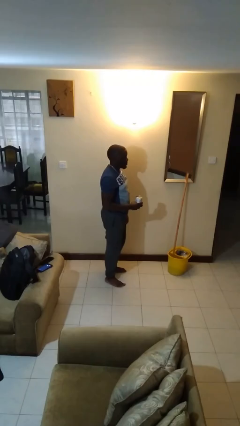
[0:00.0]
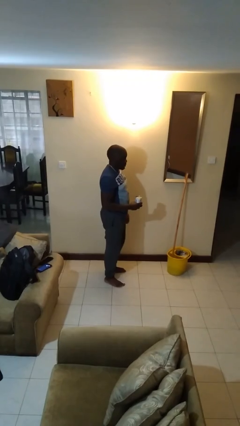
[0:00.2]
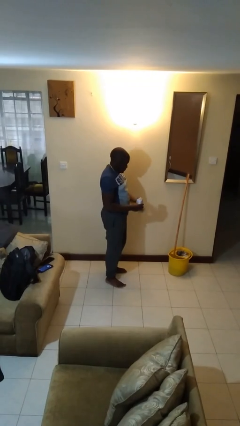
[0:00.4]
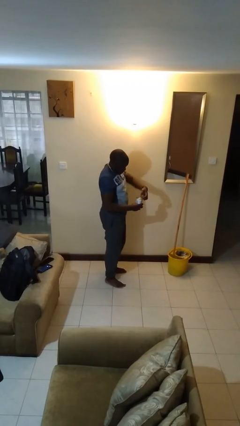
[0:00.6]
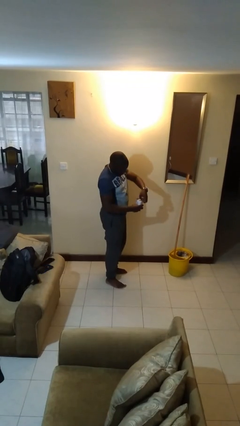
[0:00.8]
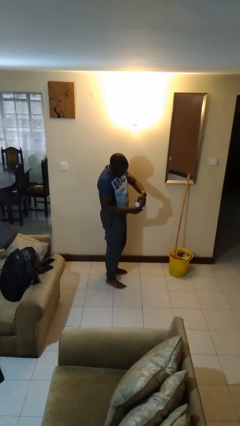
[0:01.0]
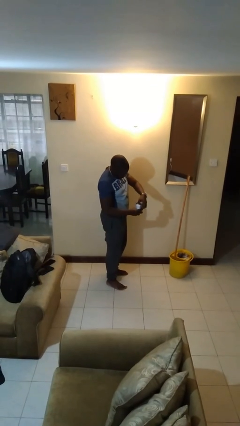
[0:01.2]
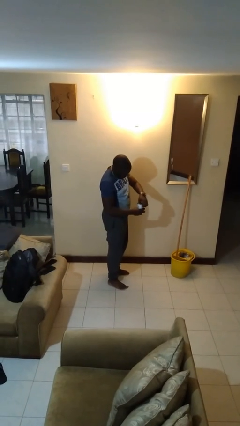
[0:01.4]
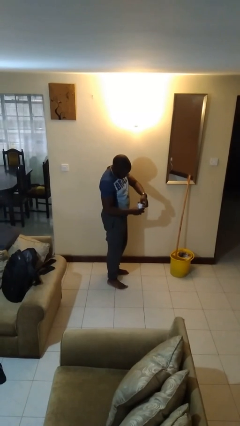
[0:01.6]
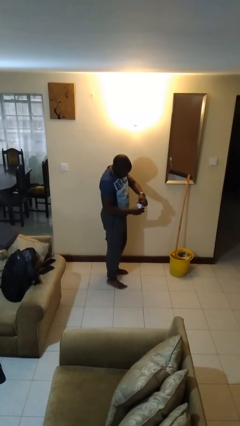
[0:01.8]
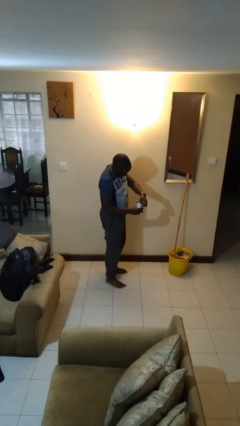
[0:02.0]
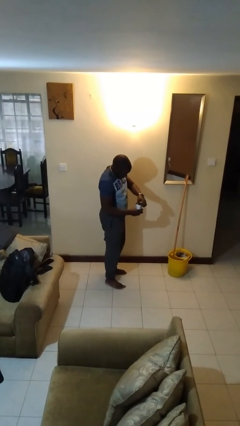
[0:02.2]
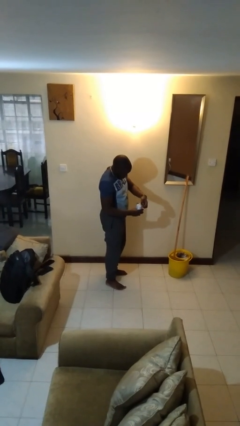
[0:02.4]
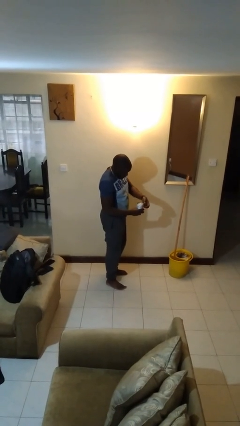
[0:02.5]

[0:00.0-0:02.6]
person opens beverage can

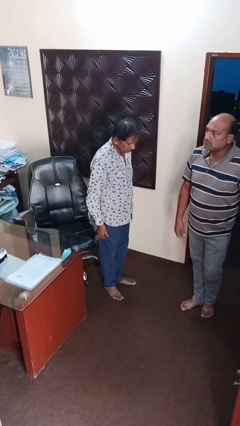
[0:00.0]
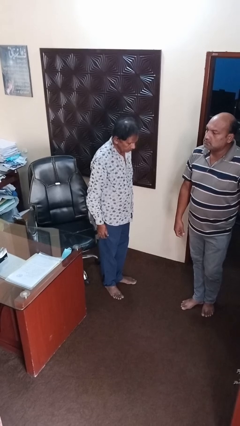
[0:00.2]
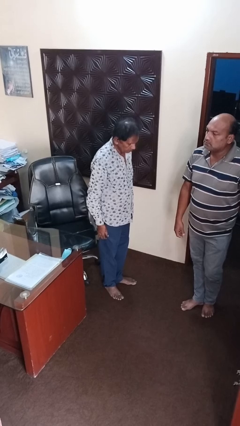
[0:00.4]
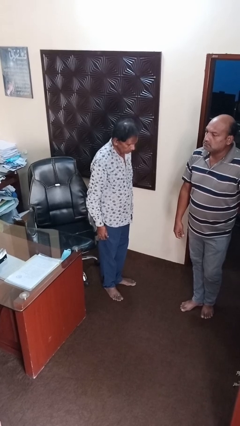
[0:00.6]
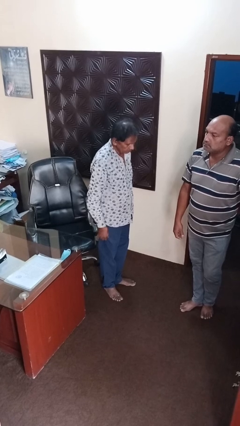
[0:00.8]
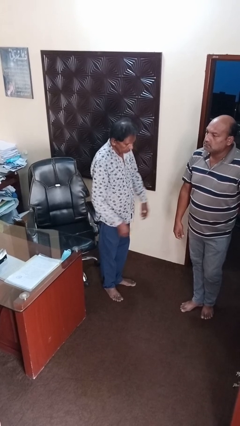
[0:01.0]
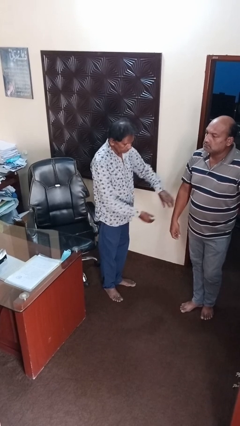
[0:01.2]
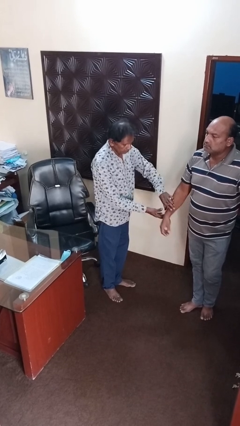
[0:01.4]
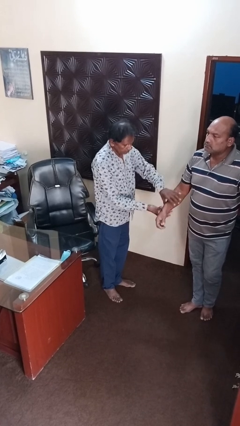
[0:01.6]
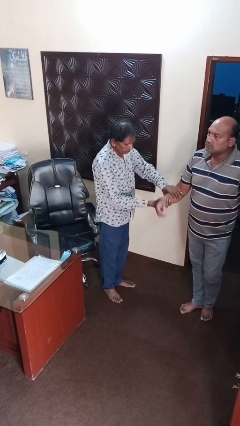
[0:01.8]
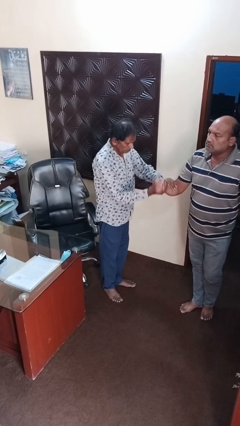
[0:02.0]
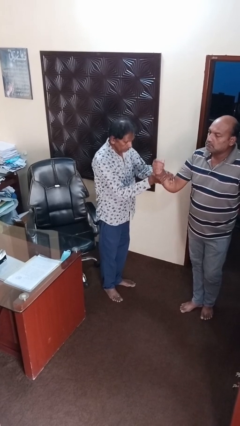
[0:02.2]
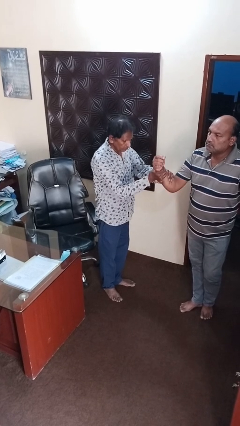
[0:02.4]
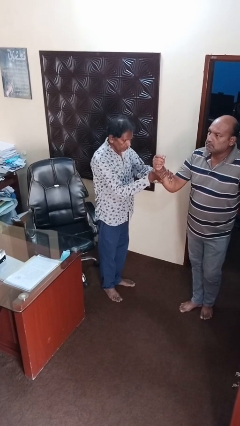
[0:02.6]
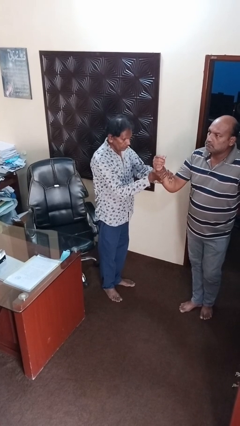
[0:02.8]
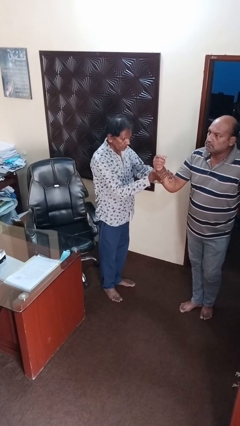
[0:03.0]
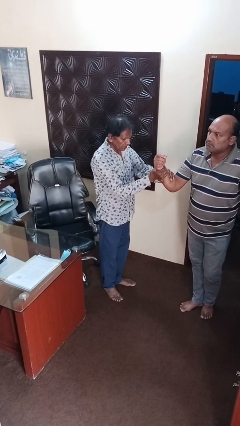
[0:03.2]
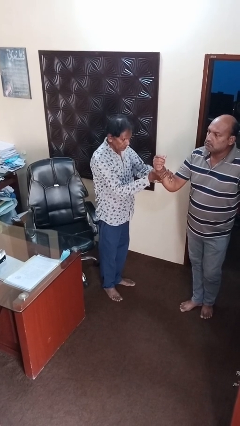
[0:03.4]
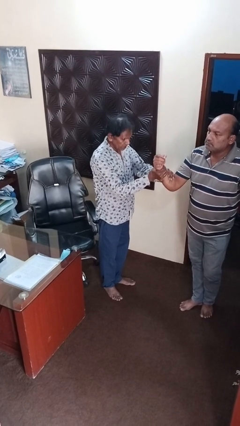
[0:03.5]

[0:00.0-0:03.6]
person grabs person by forearm

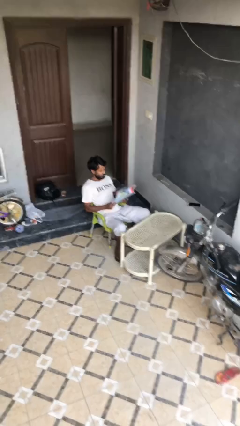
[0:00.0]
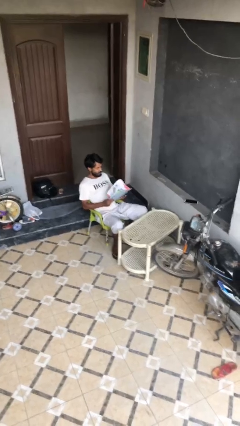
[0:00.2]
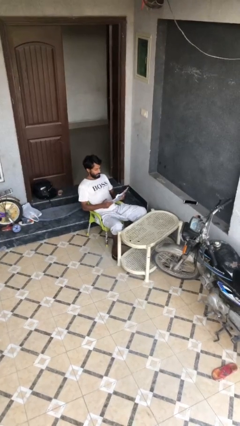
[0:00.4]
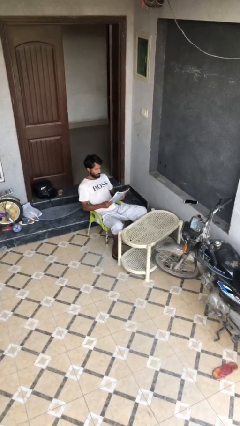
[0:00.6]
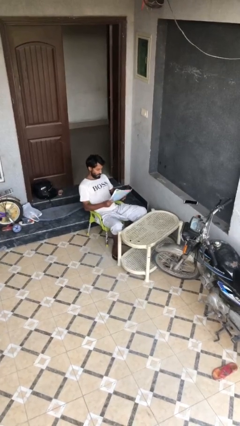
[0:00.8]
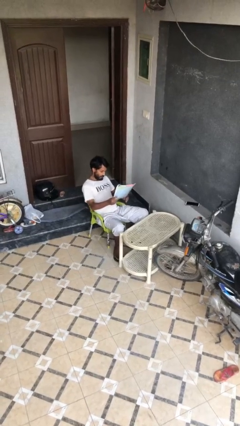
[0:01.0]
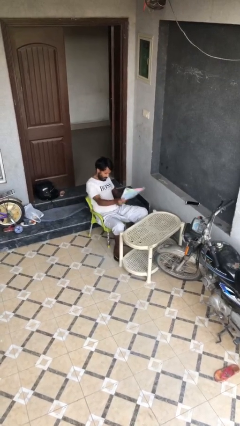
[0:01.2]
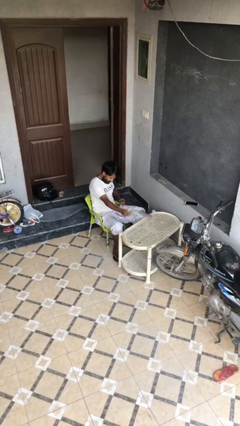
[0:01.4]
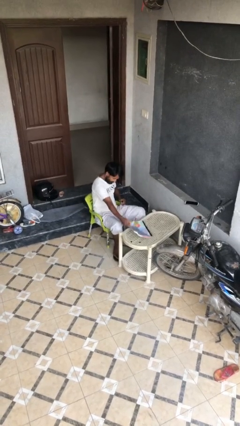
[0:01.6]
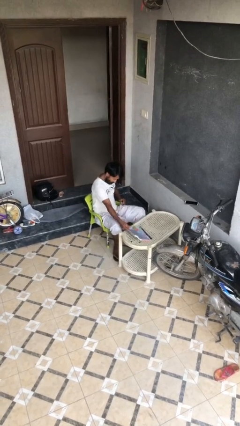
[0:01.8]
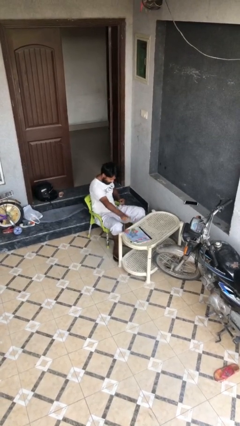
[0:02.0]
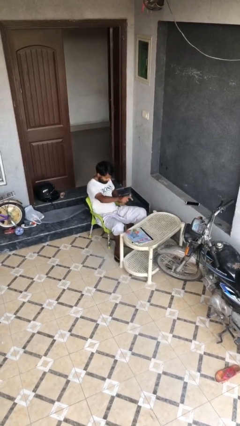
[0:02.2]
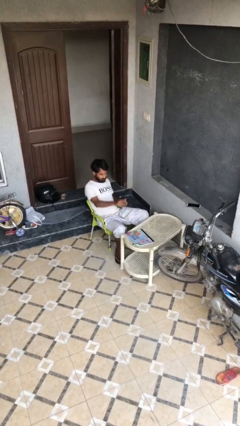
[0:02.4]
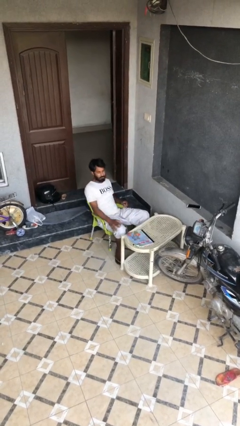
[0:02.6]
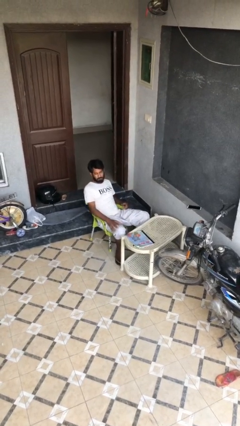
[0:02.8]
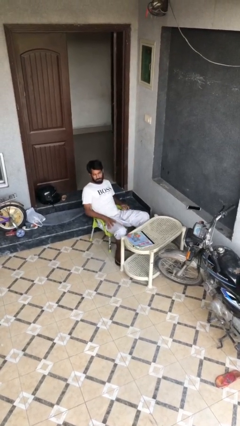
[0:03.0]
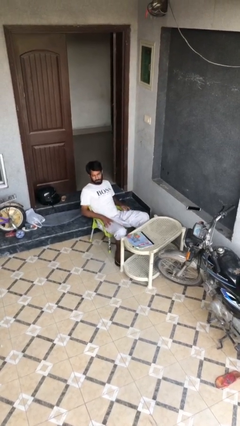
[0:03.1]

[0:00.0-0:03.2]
person puts down object on table

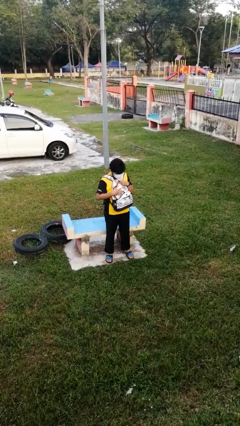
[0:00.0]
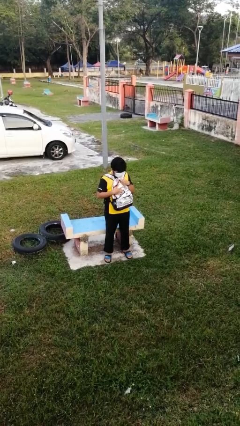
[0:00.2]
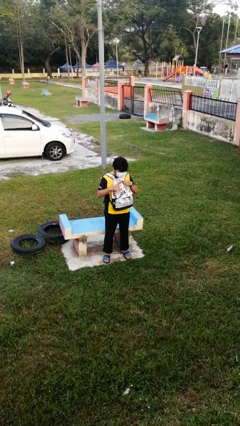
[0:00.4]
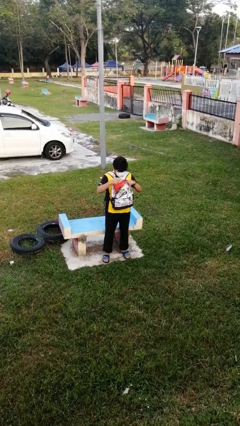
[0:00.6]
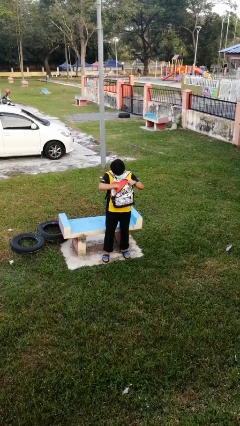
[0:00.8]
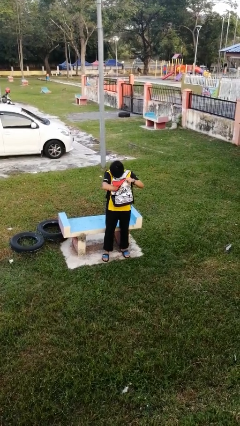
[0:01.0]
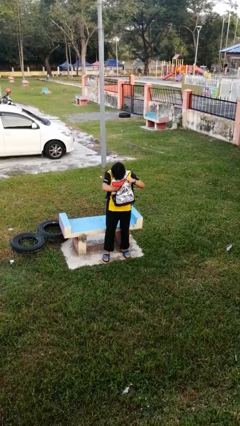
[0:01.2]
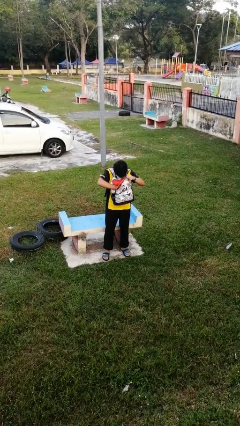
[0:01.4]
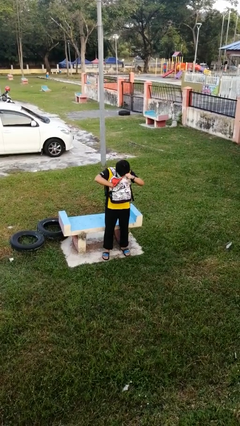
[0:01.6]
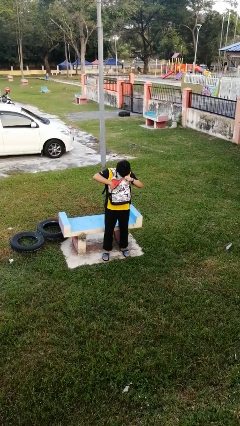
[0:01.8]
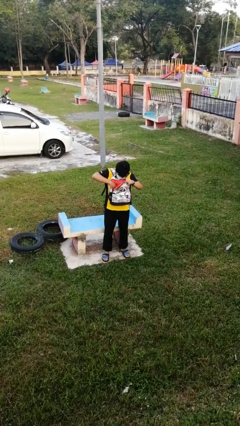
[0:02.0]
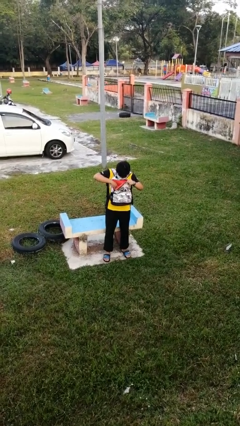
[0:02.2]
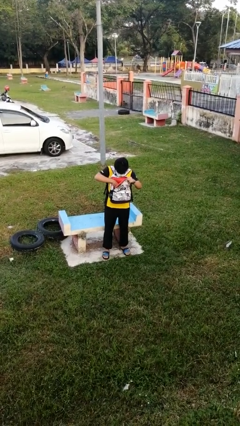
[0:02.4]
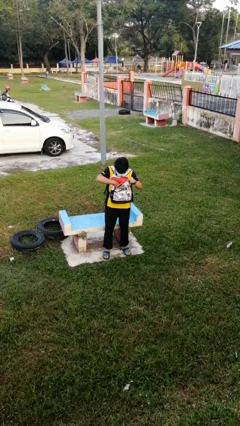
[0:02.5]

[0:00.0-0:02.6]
person searches in backpack

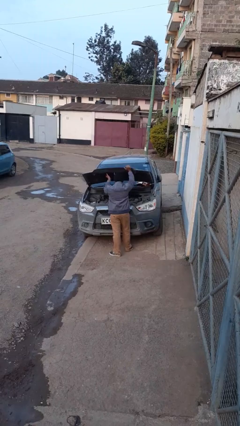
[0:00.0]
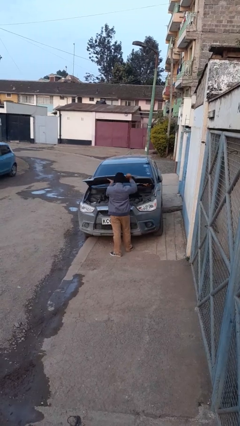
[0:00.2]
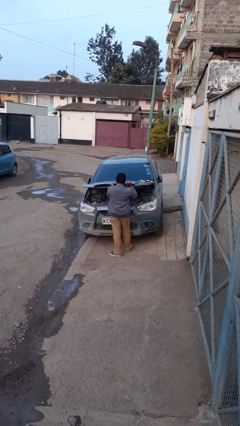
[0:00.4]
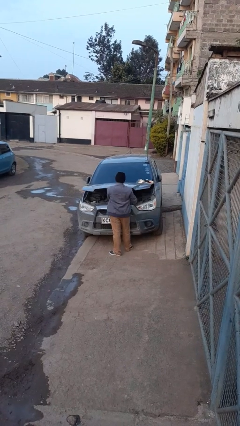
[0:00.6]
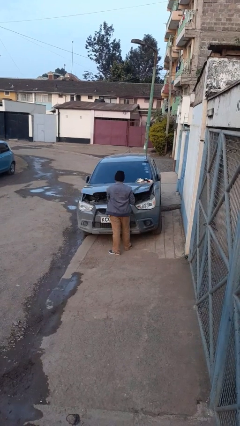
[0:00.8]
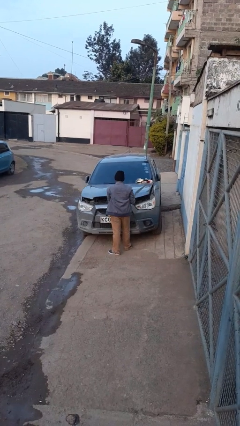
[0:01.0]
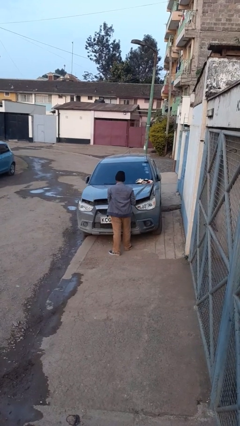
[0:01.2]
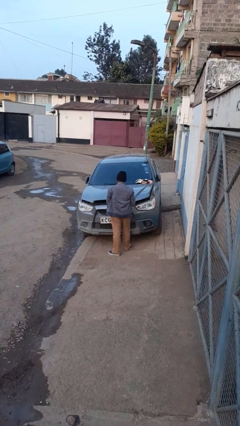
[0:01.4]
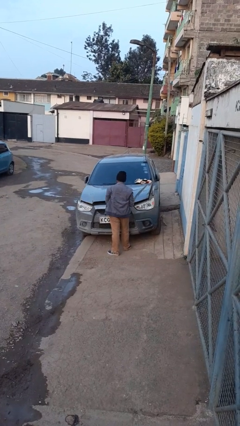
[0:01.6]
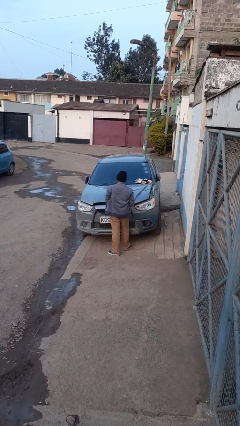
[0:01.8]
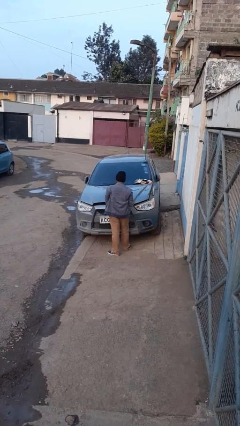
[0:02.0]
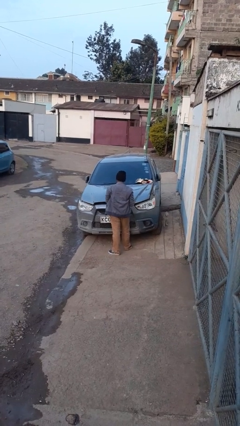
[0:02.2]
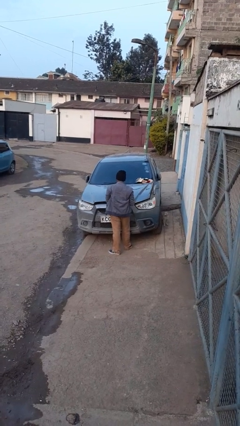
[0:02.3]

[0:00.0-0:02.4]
person closes car hood

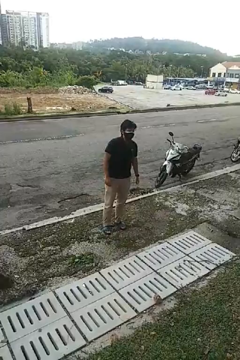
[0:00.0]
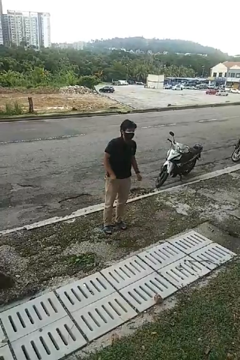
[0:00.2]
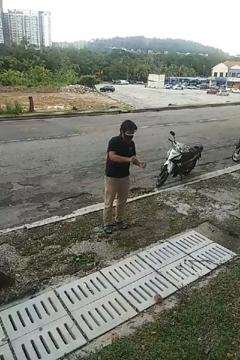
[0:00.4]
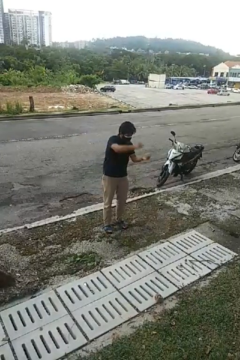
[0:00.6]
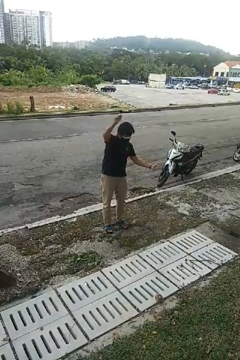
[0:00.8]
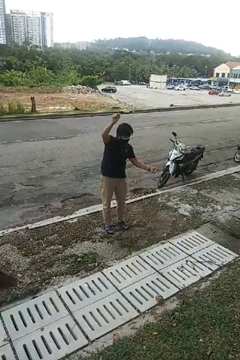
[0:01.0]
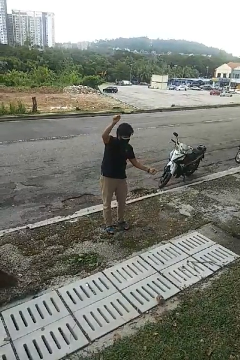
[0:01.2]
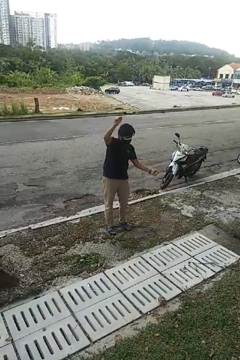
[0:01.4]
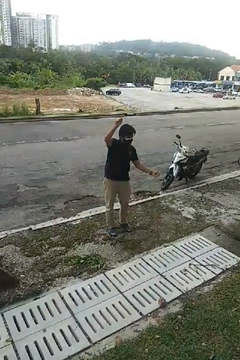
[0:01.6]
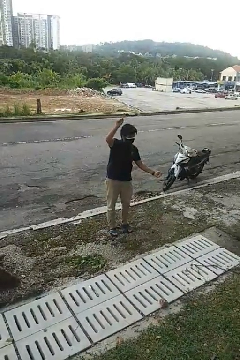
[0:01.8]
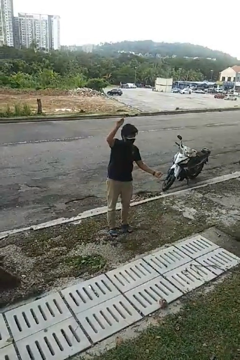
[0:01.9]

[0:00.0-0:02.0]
person gestures zoom in

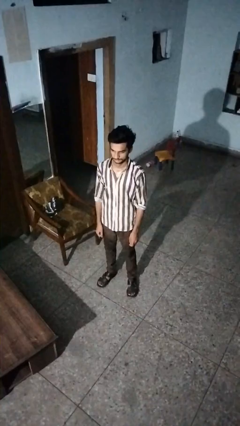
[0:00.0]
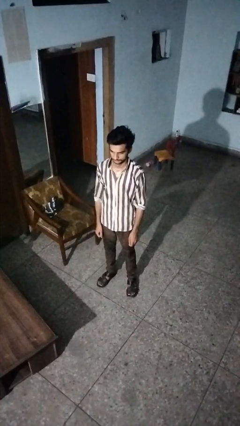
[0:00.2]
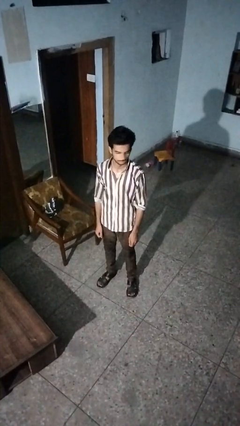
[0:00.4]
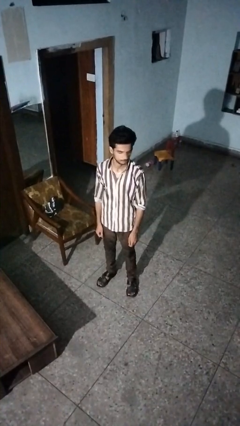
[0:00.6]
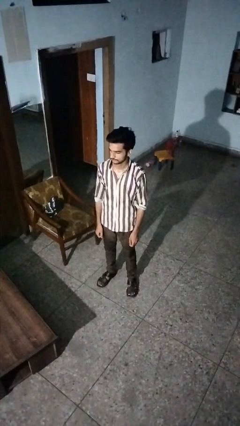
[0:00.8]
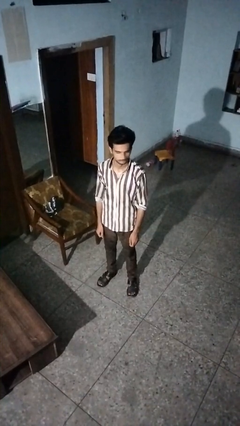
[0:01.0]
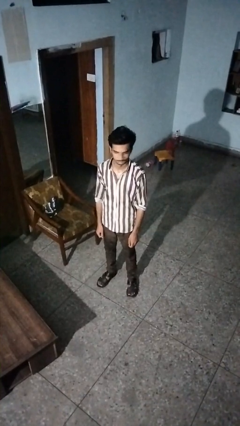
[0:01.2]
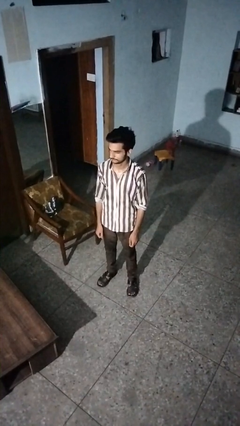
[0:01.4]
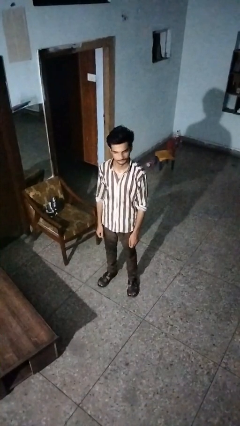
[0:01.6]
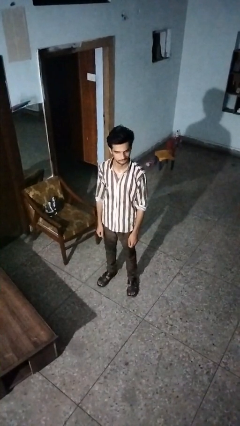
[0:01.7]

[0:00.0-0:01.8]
person shakes head
